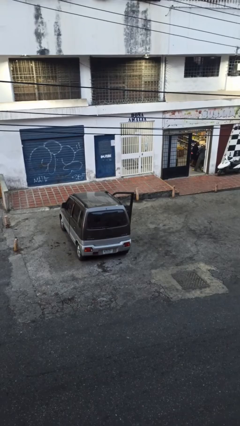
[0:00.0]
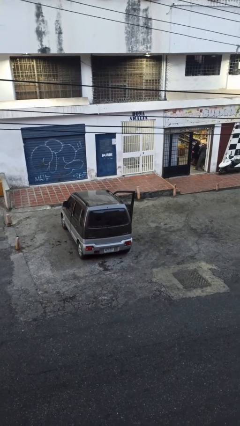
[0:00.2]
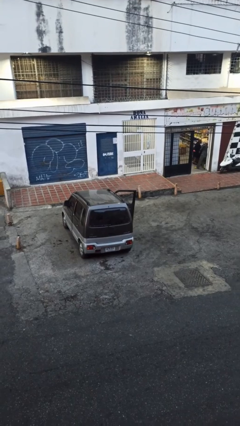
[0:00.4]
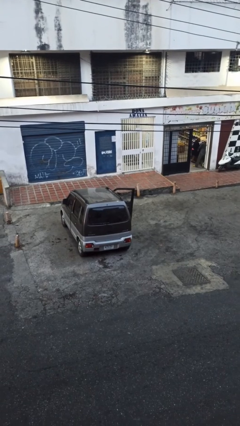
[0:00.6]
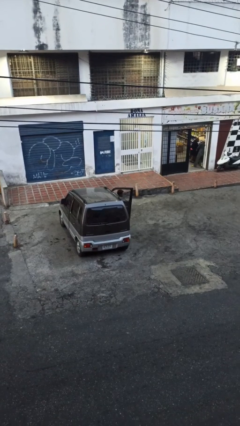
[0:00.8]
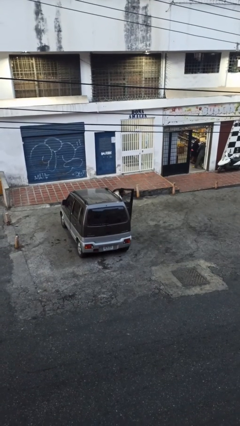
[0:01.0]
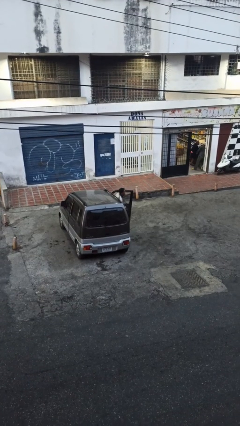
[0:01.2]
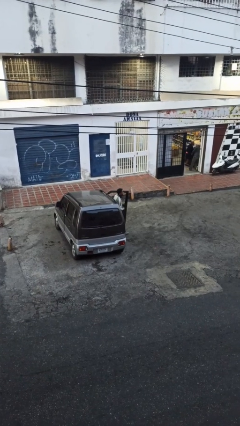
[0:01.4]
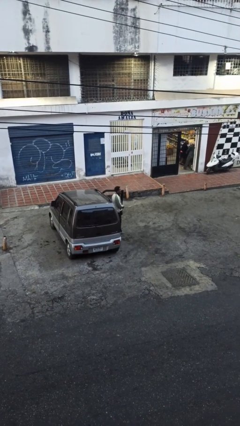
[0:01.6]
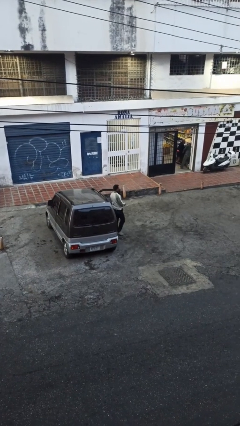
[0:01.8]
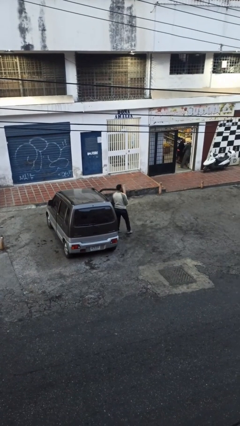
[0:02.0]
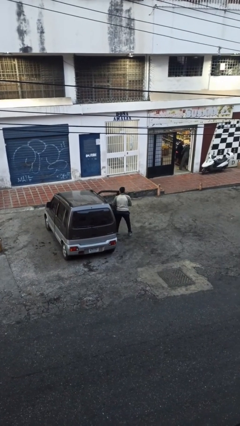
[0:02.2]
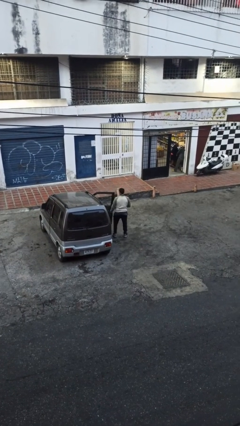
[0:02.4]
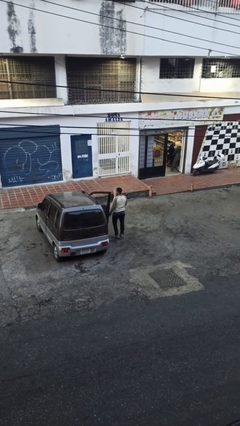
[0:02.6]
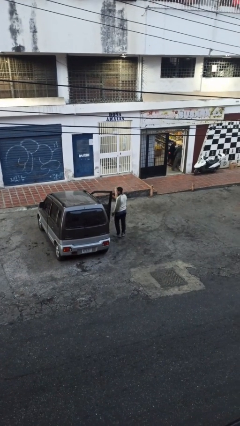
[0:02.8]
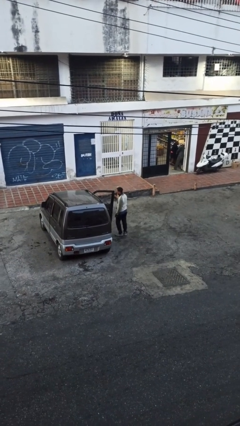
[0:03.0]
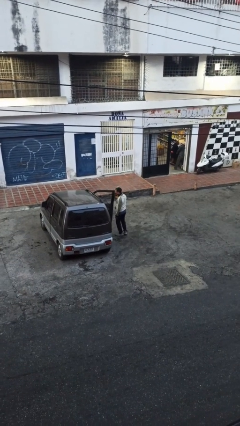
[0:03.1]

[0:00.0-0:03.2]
person exits car

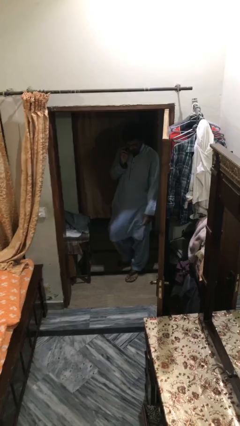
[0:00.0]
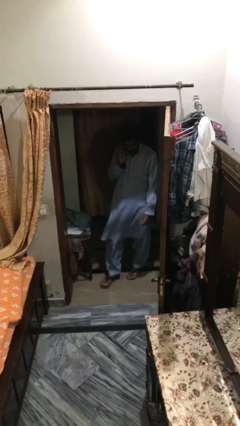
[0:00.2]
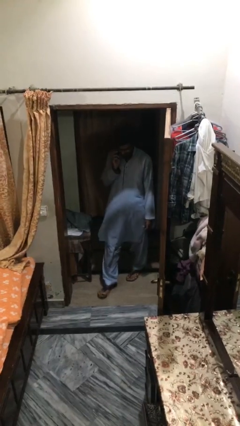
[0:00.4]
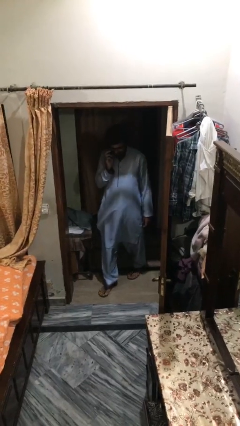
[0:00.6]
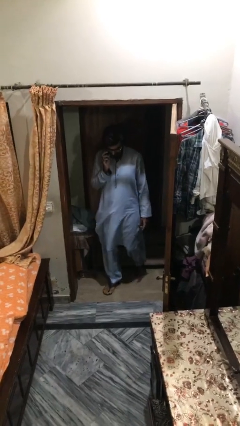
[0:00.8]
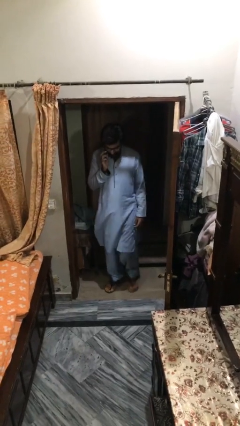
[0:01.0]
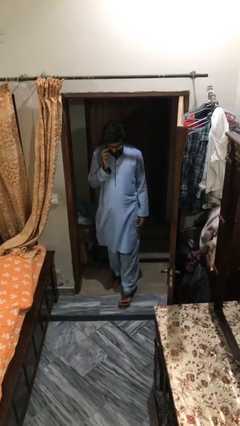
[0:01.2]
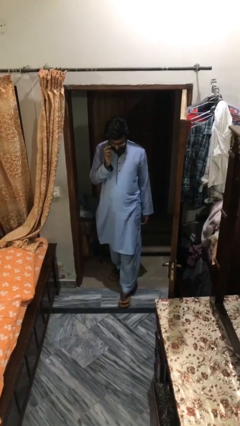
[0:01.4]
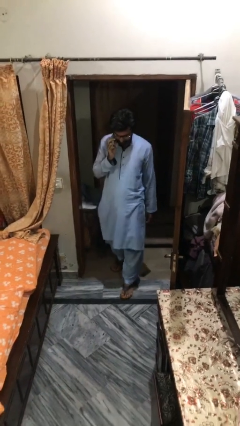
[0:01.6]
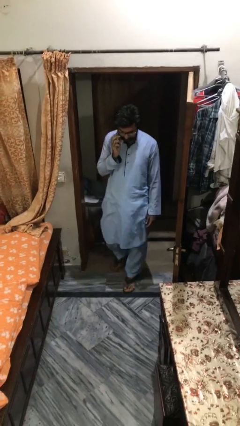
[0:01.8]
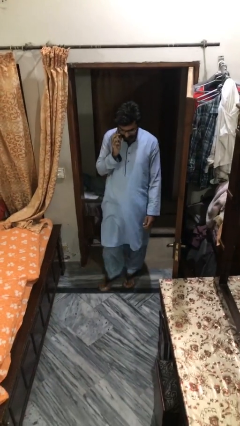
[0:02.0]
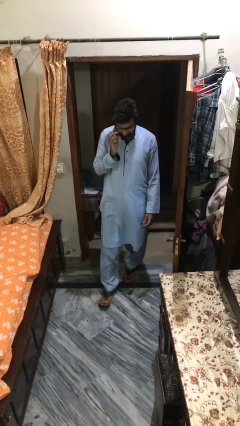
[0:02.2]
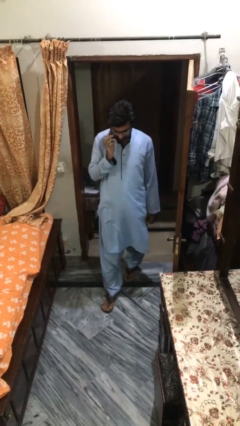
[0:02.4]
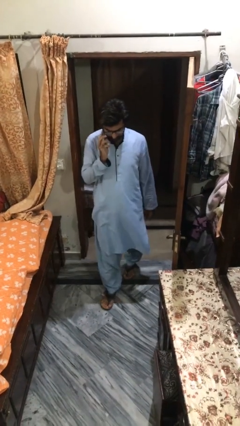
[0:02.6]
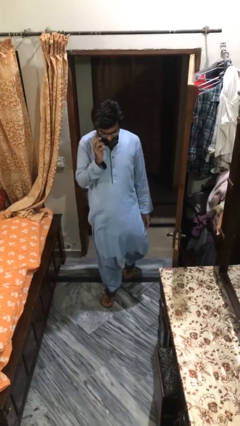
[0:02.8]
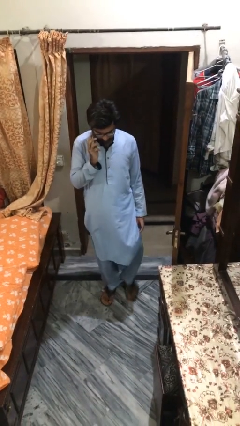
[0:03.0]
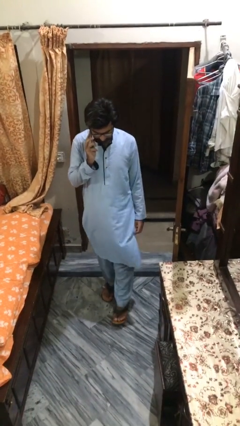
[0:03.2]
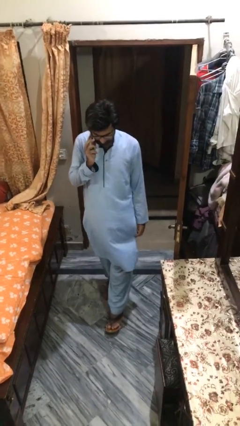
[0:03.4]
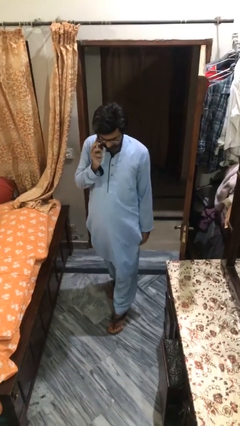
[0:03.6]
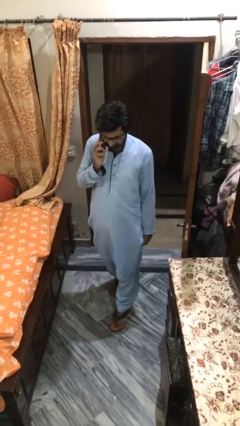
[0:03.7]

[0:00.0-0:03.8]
person enters scene through structure

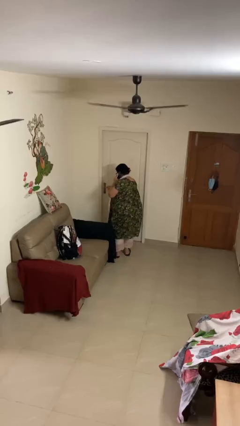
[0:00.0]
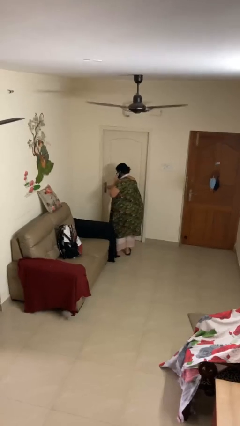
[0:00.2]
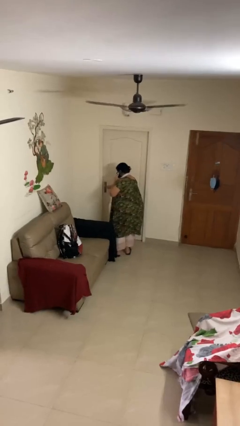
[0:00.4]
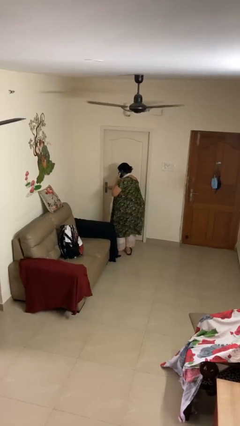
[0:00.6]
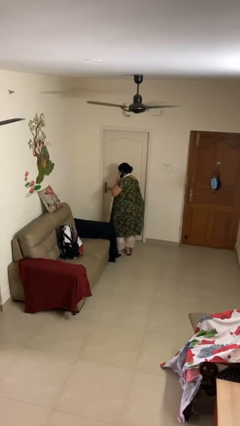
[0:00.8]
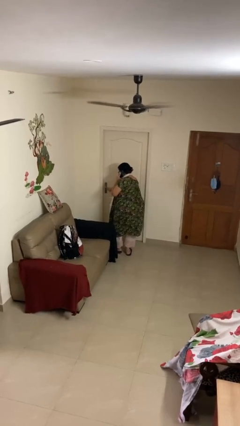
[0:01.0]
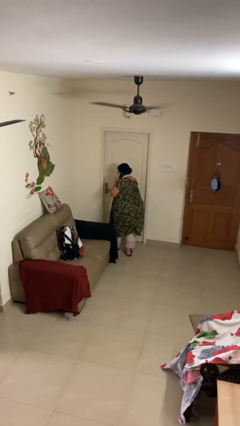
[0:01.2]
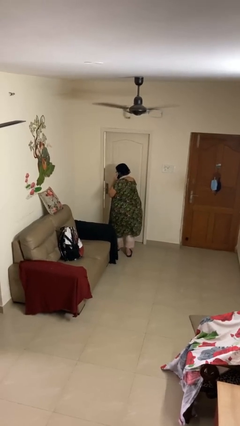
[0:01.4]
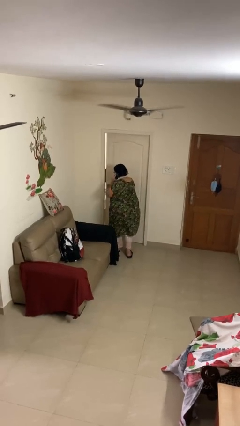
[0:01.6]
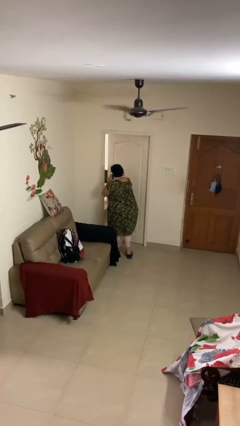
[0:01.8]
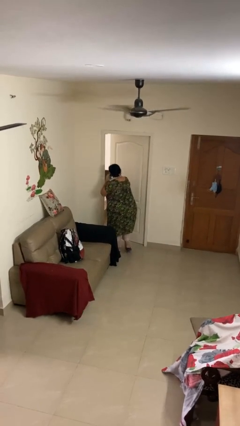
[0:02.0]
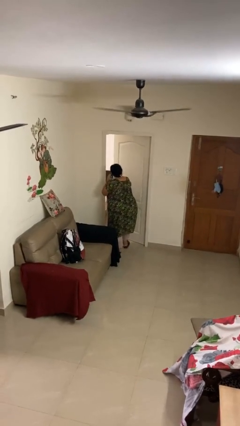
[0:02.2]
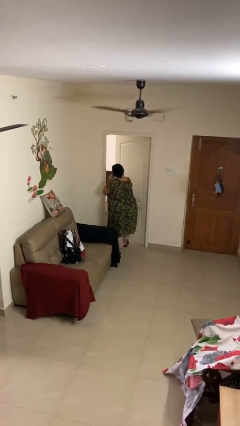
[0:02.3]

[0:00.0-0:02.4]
person opens facility door

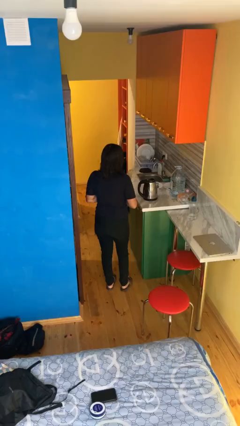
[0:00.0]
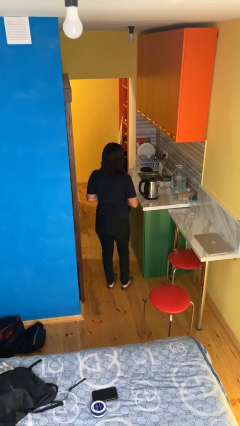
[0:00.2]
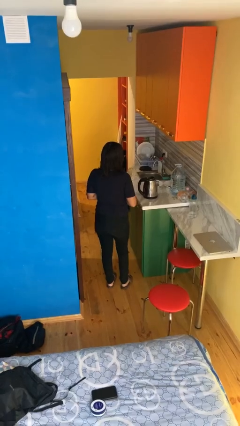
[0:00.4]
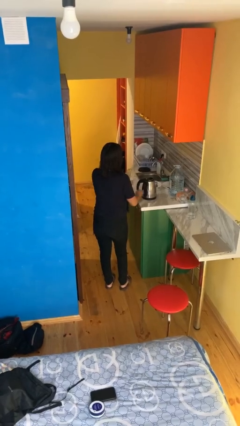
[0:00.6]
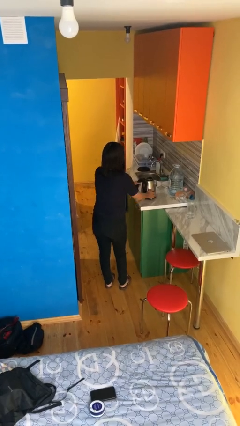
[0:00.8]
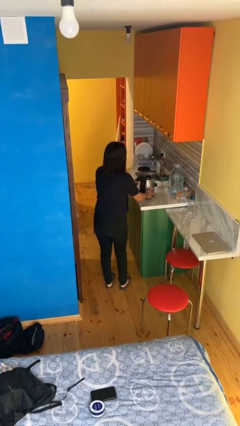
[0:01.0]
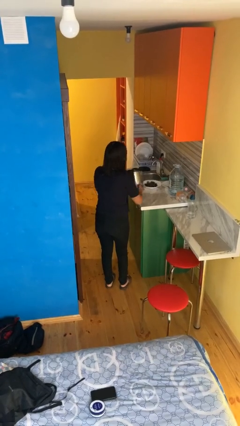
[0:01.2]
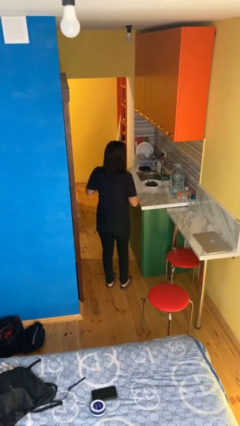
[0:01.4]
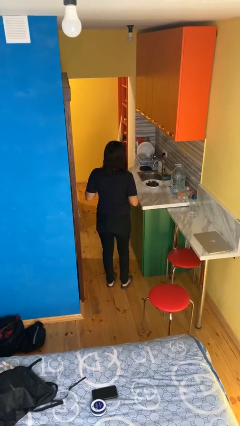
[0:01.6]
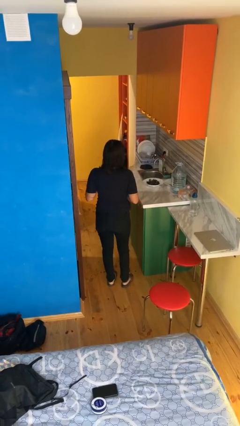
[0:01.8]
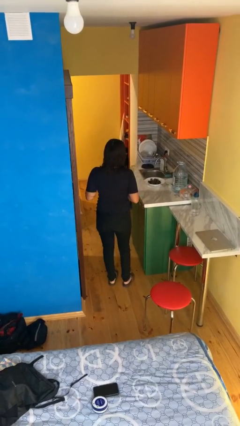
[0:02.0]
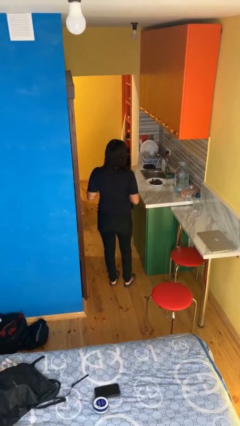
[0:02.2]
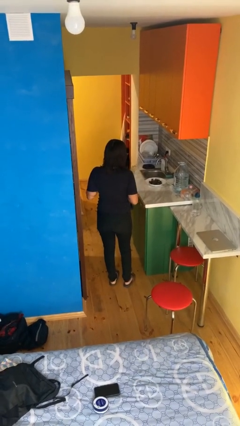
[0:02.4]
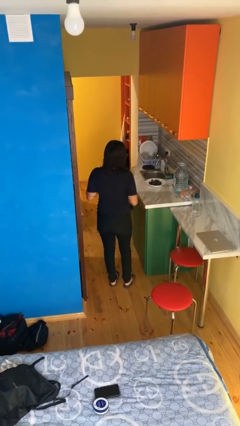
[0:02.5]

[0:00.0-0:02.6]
person picks up object from countertop

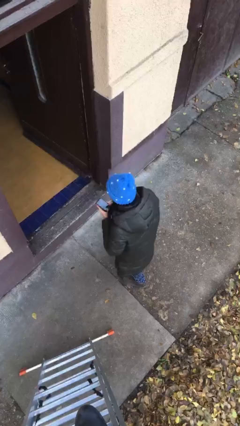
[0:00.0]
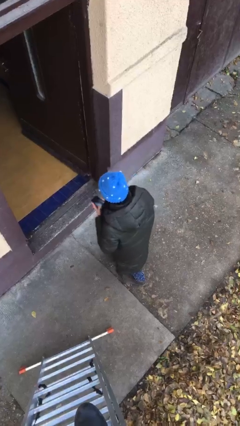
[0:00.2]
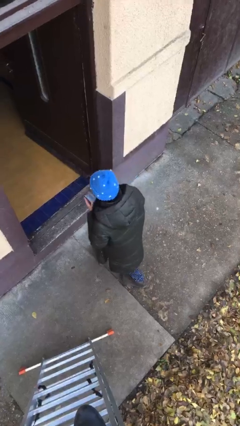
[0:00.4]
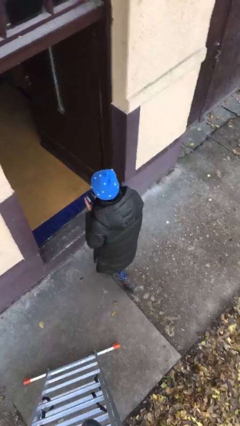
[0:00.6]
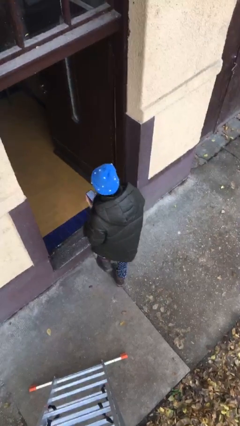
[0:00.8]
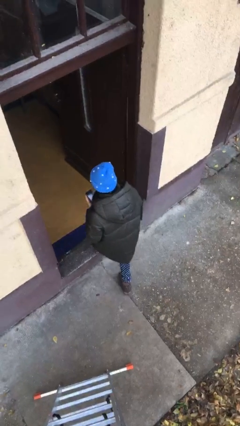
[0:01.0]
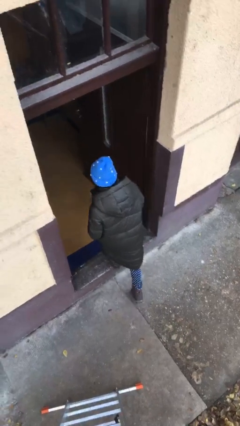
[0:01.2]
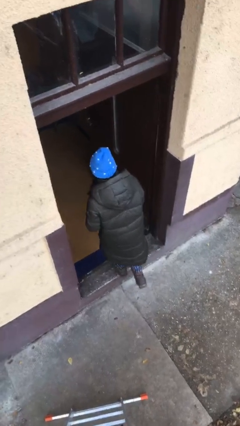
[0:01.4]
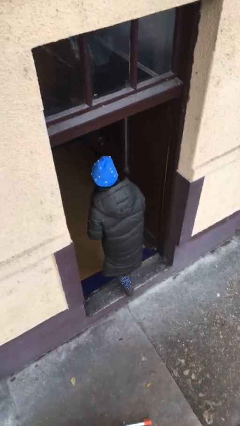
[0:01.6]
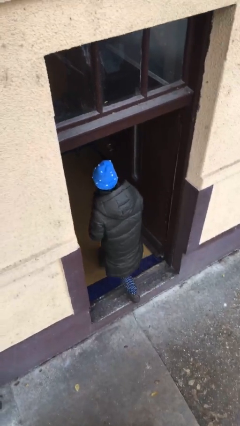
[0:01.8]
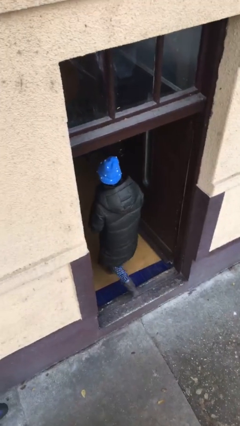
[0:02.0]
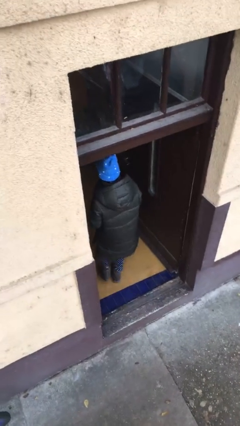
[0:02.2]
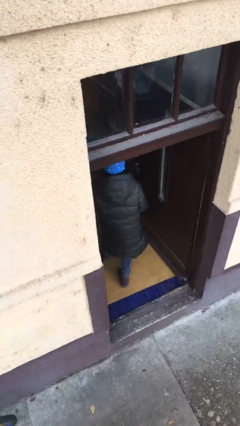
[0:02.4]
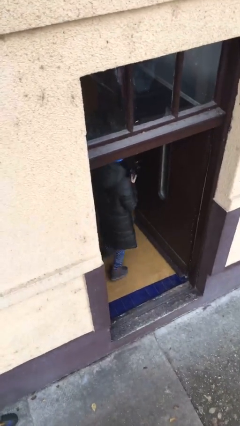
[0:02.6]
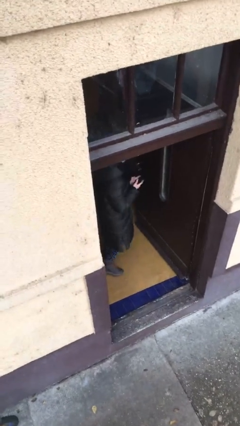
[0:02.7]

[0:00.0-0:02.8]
person exits scene through structure

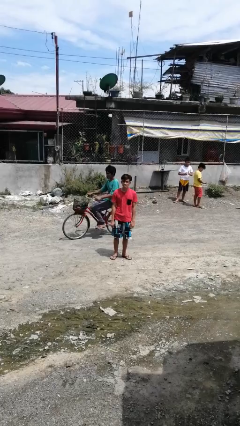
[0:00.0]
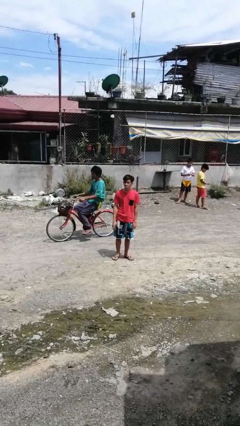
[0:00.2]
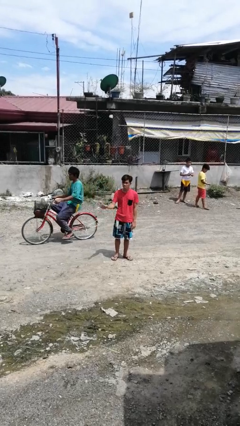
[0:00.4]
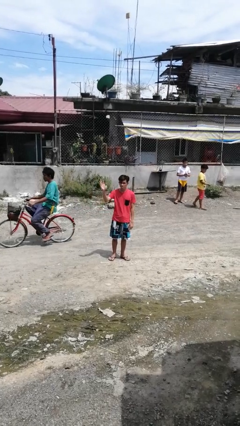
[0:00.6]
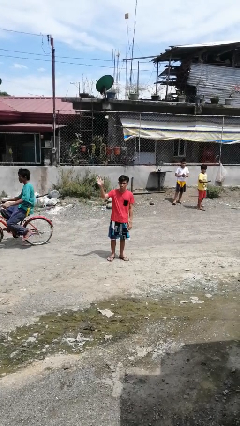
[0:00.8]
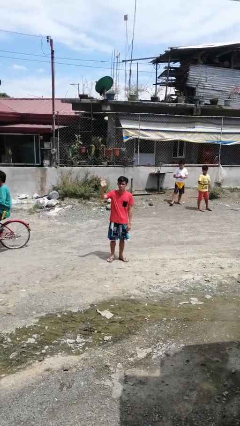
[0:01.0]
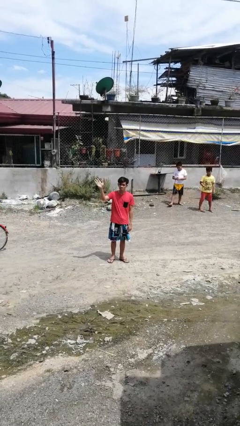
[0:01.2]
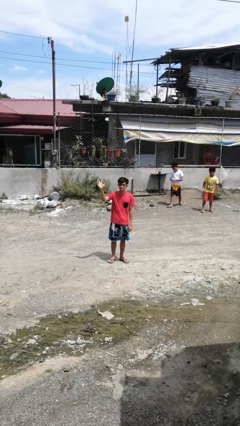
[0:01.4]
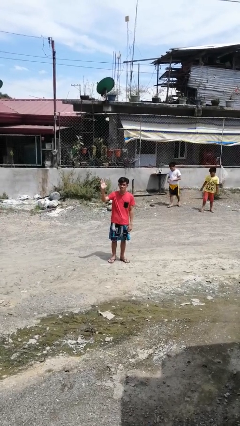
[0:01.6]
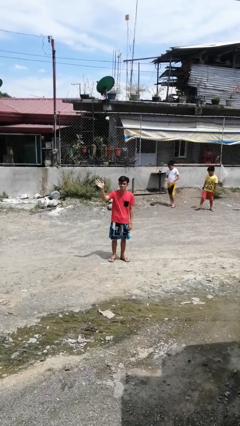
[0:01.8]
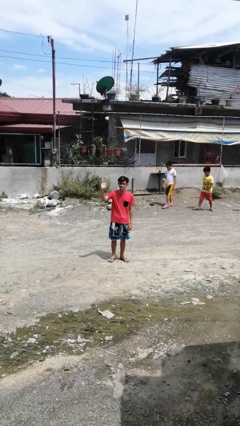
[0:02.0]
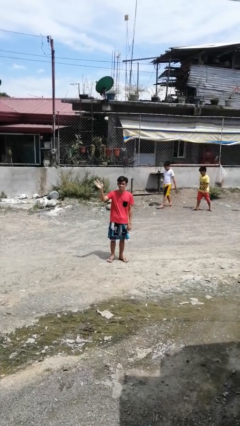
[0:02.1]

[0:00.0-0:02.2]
person waves at person

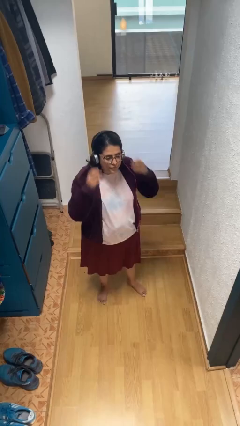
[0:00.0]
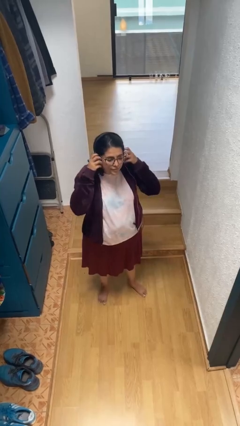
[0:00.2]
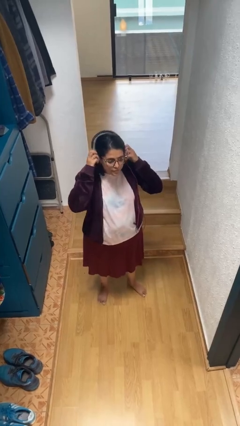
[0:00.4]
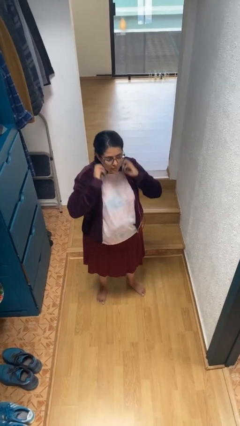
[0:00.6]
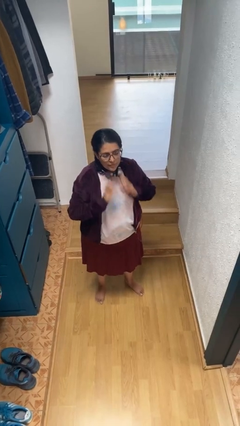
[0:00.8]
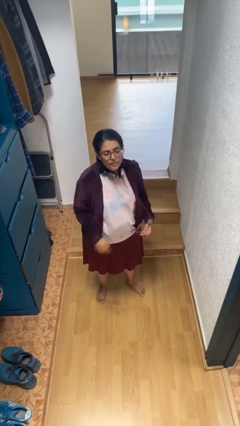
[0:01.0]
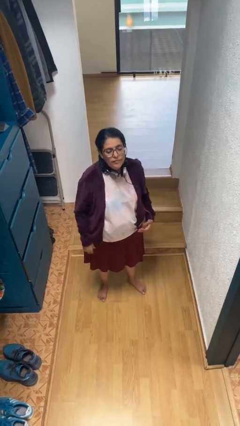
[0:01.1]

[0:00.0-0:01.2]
person takes off headphones
